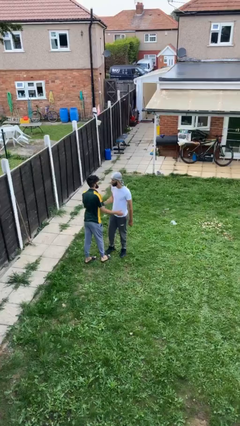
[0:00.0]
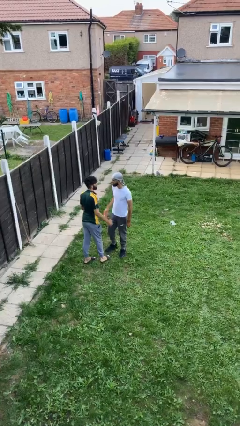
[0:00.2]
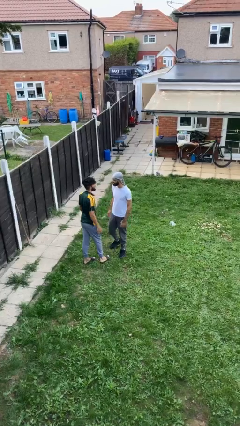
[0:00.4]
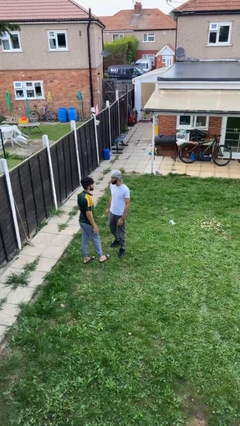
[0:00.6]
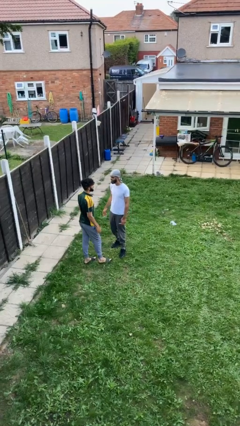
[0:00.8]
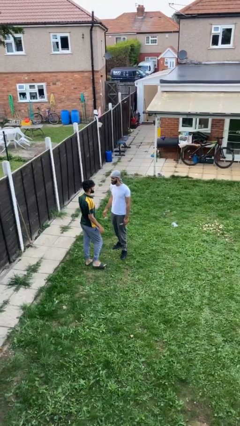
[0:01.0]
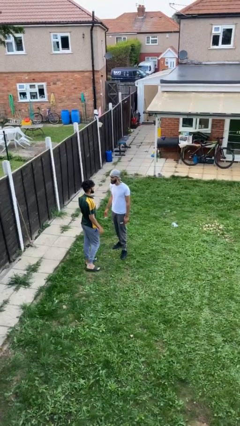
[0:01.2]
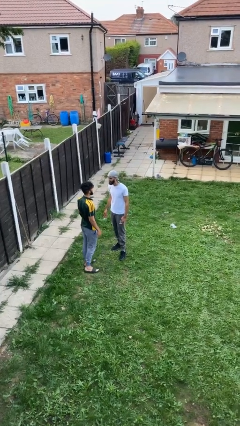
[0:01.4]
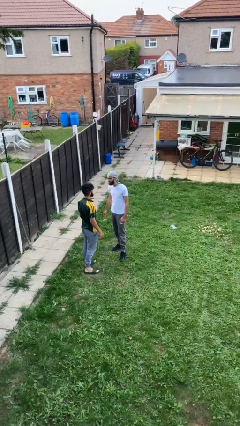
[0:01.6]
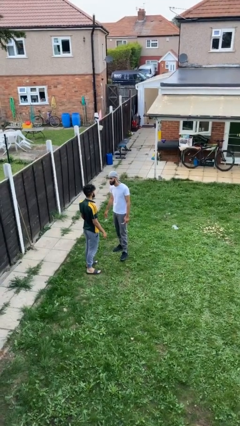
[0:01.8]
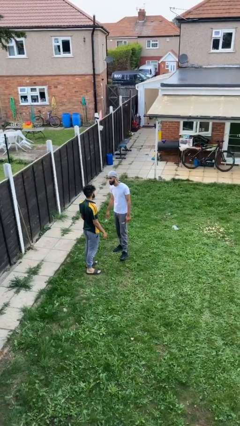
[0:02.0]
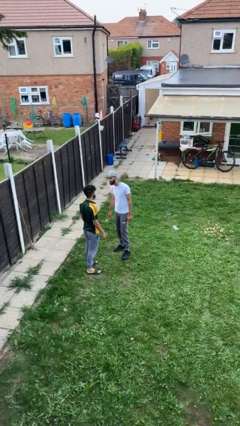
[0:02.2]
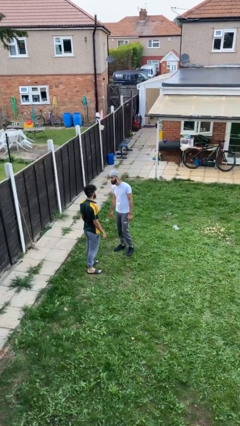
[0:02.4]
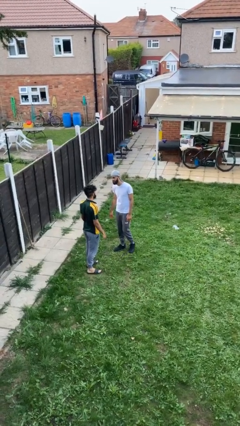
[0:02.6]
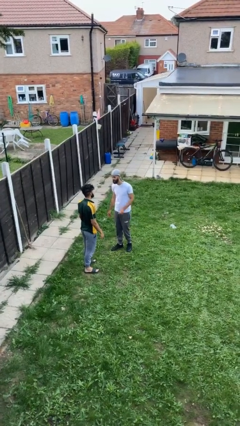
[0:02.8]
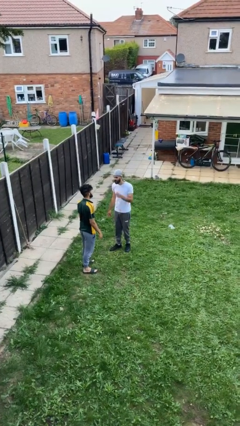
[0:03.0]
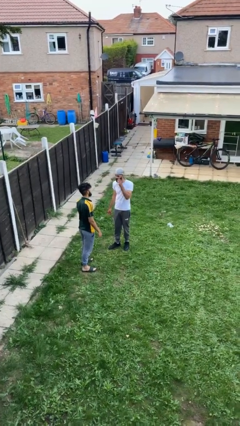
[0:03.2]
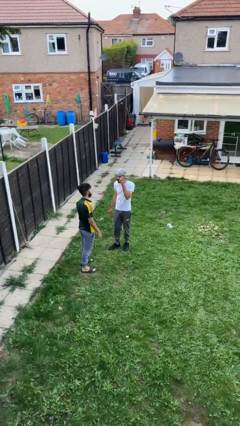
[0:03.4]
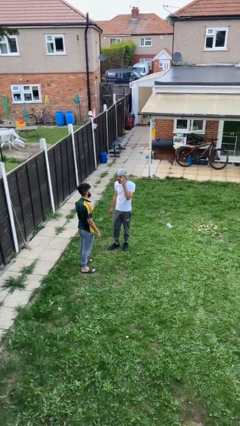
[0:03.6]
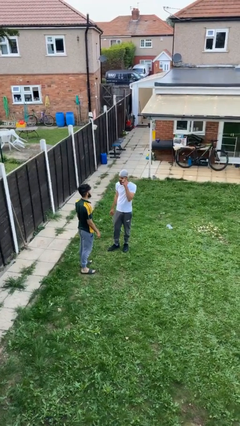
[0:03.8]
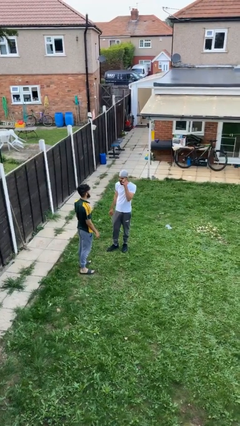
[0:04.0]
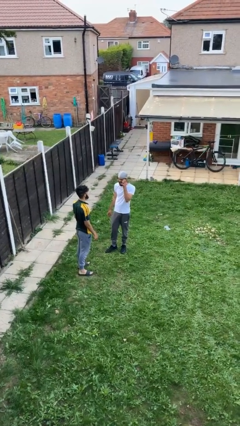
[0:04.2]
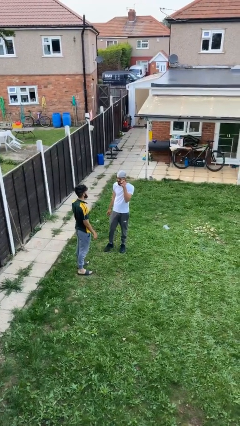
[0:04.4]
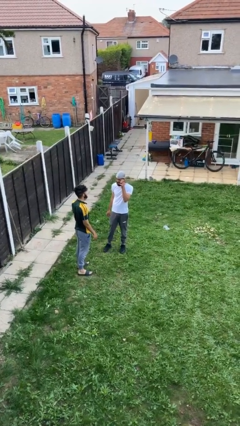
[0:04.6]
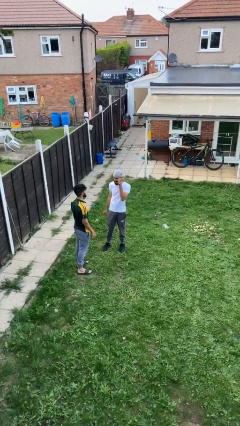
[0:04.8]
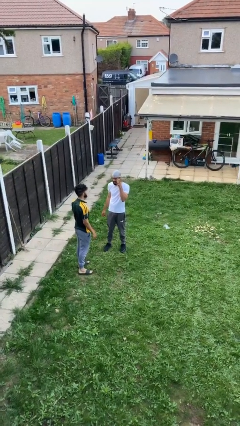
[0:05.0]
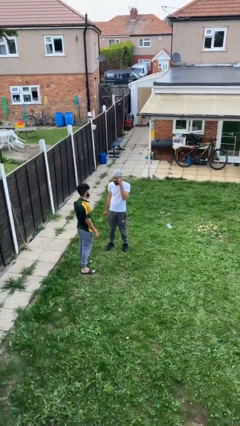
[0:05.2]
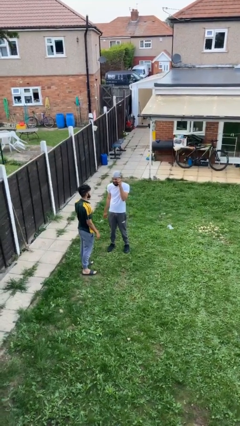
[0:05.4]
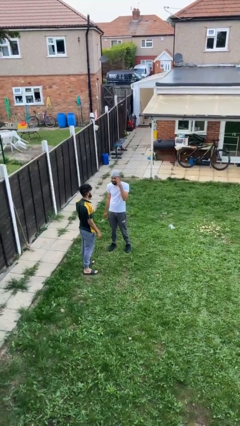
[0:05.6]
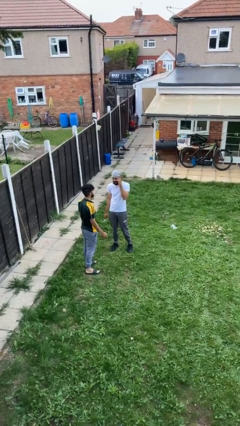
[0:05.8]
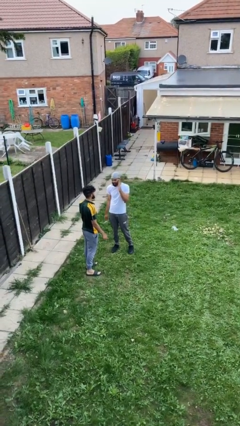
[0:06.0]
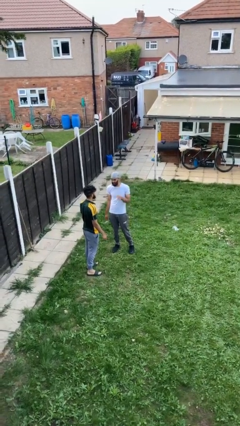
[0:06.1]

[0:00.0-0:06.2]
person talks to person

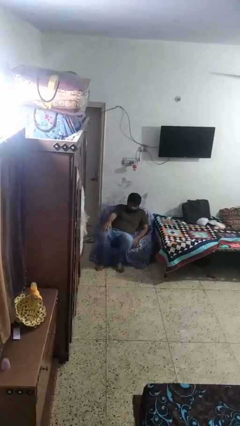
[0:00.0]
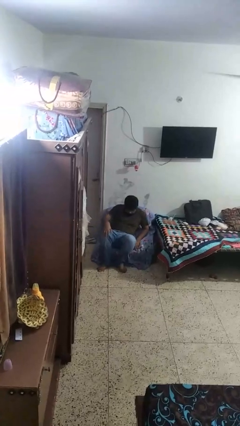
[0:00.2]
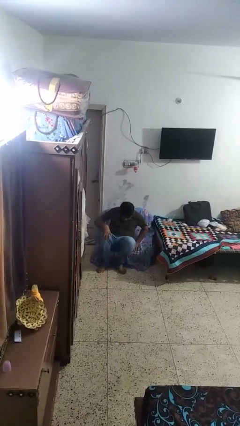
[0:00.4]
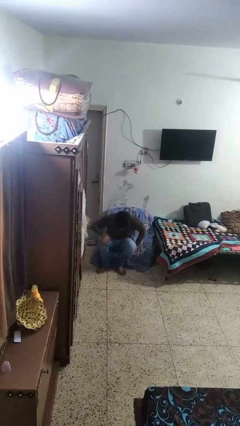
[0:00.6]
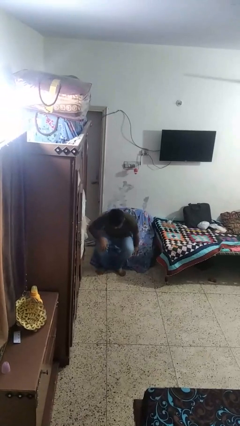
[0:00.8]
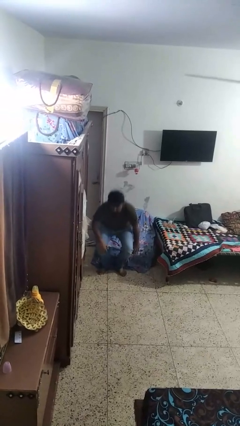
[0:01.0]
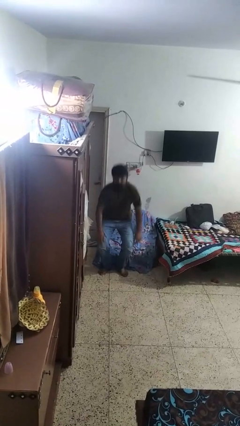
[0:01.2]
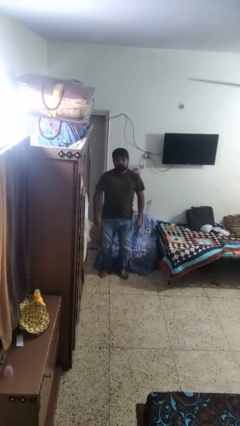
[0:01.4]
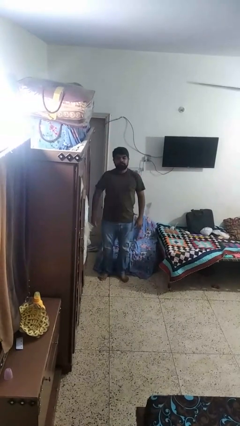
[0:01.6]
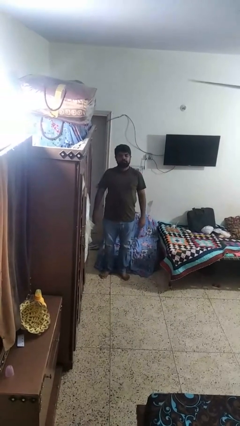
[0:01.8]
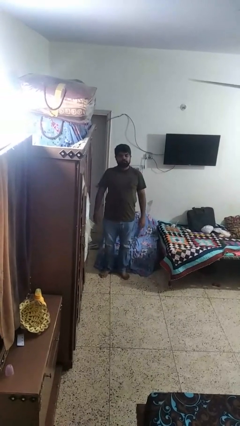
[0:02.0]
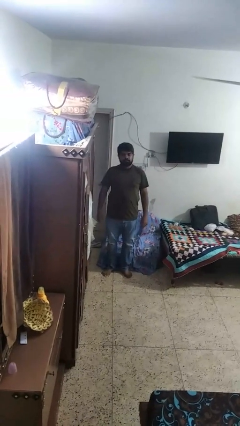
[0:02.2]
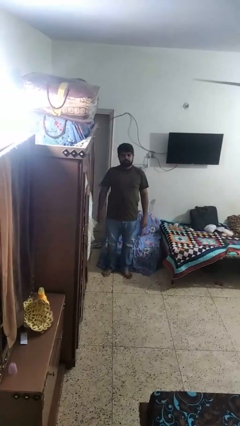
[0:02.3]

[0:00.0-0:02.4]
person stands up

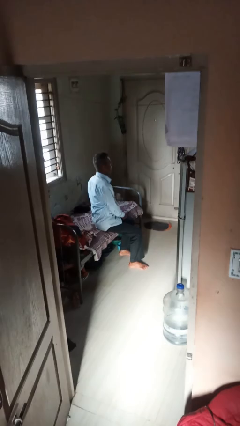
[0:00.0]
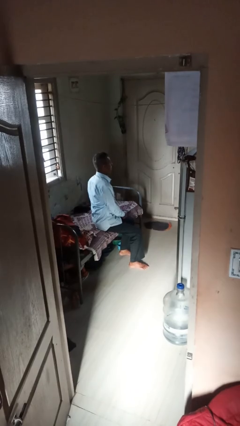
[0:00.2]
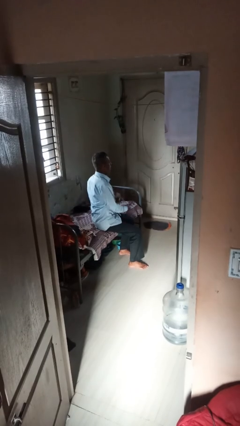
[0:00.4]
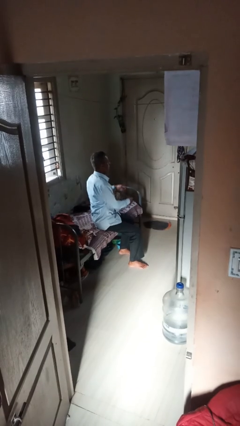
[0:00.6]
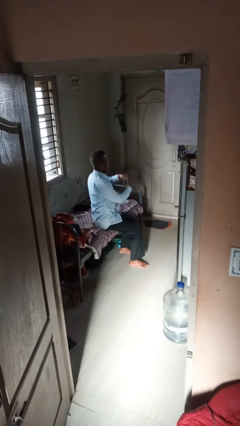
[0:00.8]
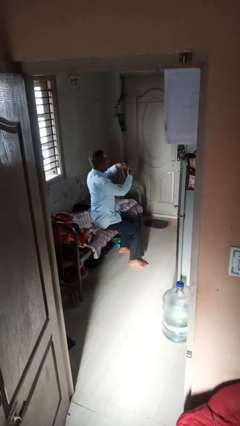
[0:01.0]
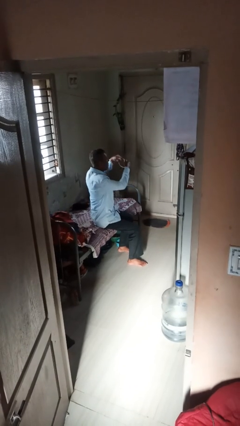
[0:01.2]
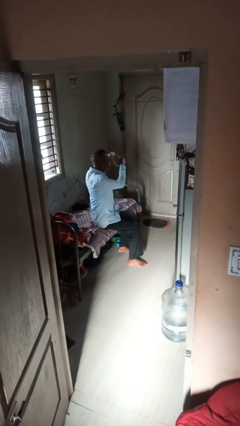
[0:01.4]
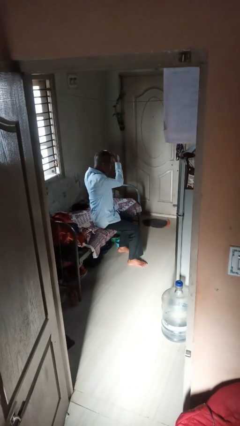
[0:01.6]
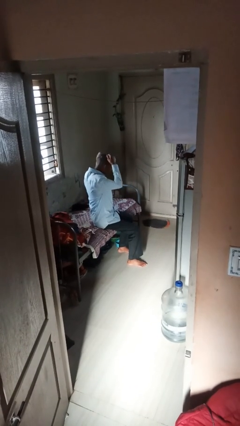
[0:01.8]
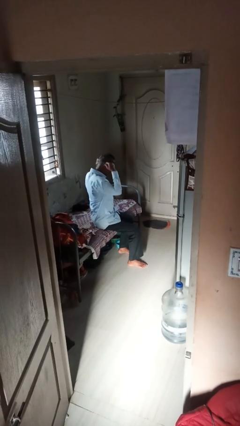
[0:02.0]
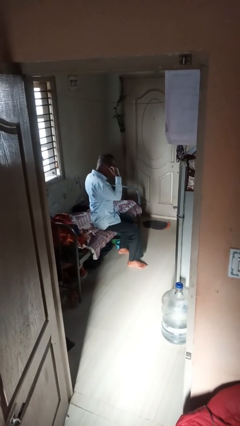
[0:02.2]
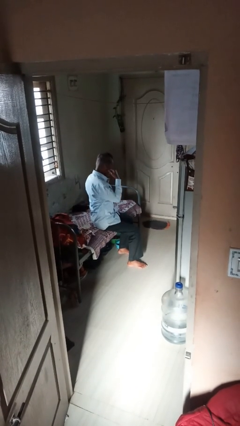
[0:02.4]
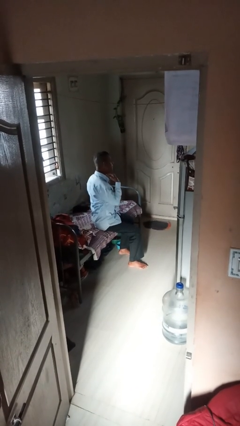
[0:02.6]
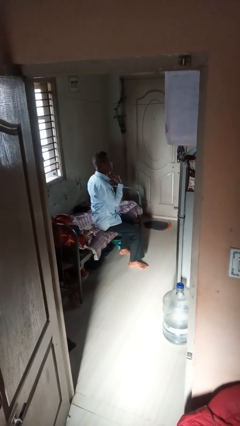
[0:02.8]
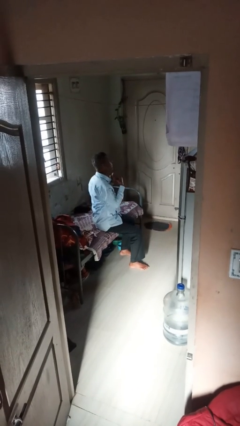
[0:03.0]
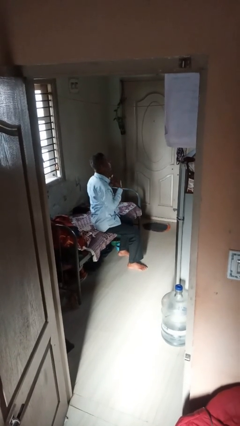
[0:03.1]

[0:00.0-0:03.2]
person puts on necklace

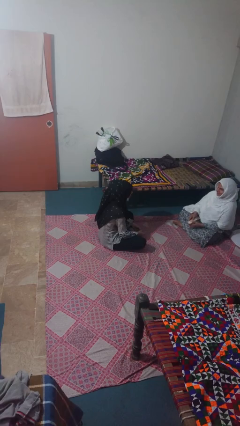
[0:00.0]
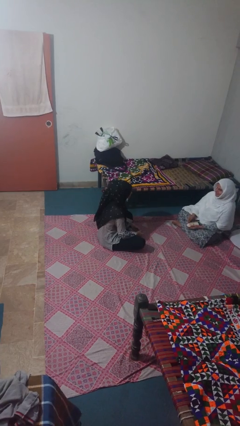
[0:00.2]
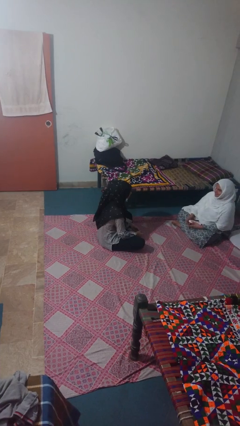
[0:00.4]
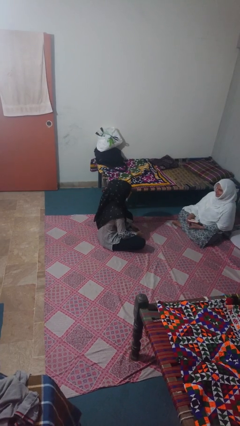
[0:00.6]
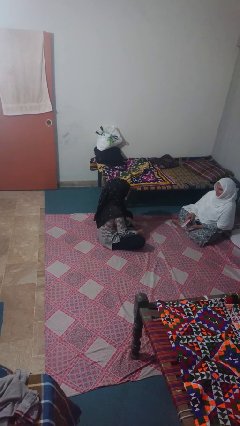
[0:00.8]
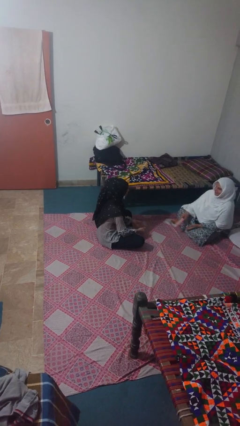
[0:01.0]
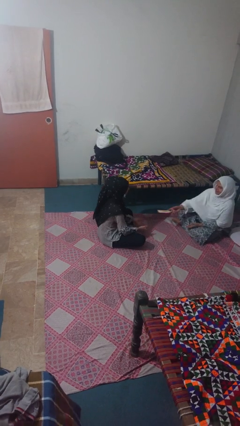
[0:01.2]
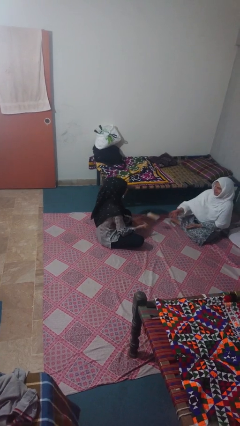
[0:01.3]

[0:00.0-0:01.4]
person catches object from person

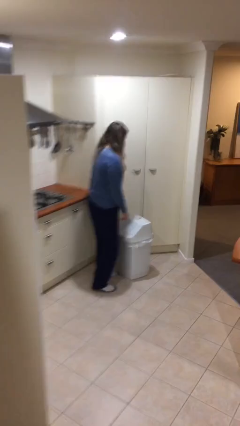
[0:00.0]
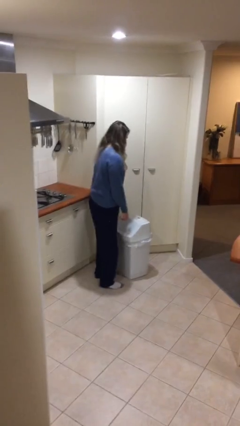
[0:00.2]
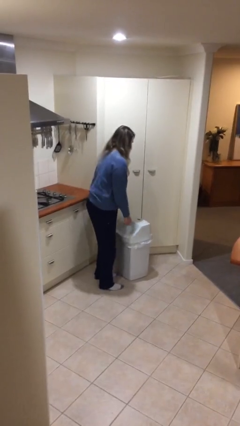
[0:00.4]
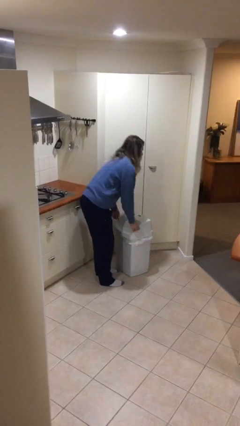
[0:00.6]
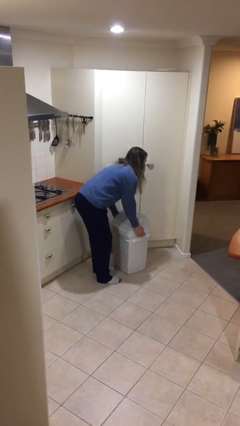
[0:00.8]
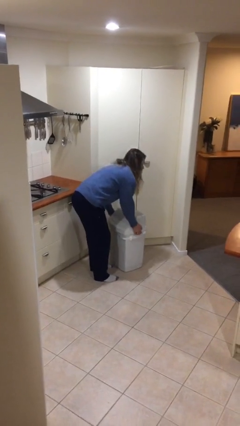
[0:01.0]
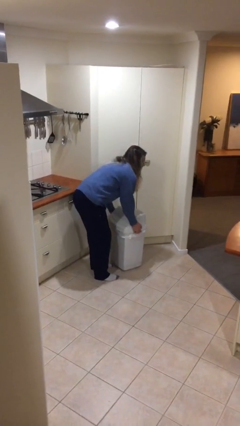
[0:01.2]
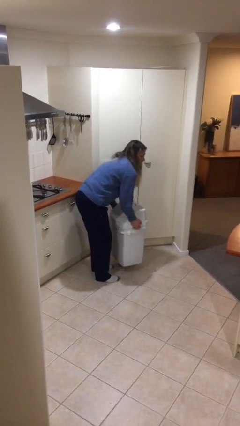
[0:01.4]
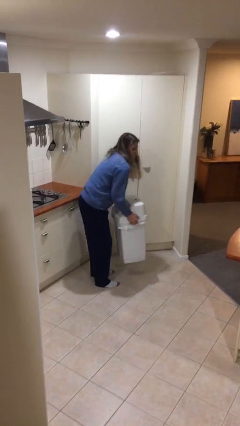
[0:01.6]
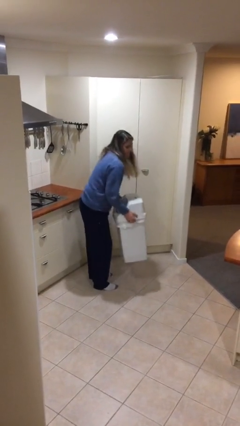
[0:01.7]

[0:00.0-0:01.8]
person picks up object from floor

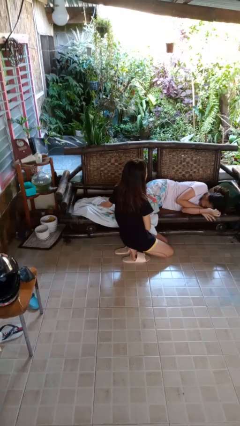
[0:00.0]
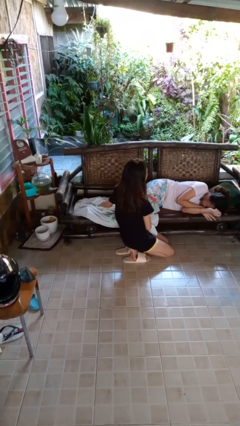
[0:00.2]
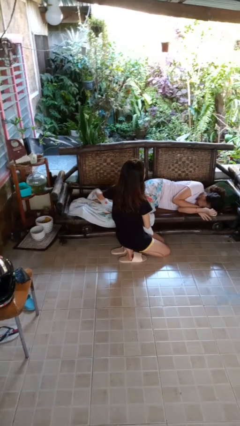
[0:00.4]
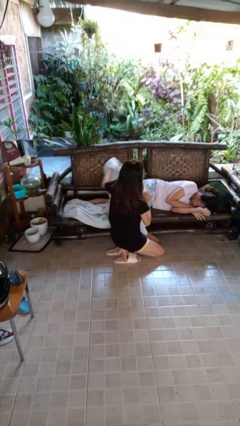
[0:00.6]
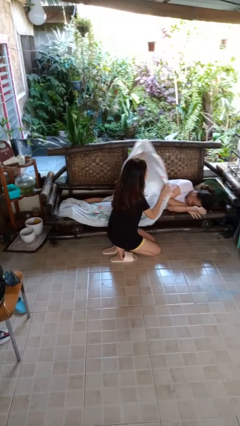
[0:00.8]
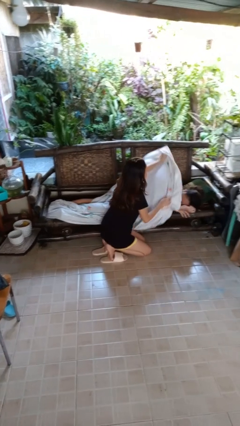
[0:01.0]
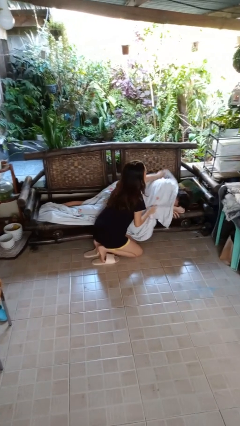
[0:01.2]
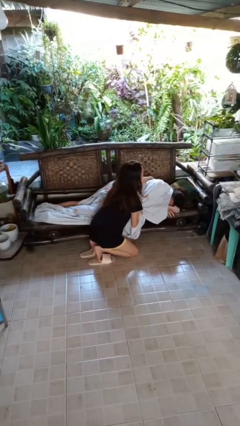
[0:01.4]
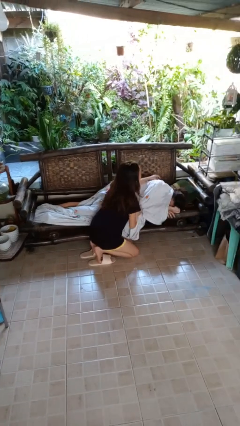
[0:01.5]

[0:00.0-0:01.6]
person covers friend with blanket

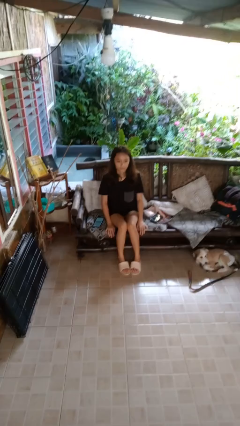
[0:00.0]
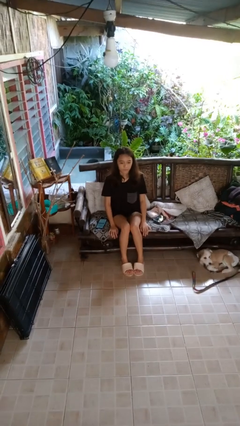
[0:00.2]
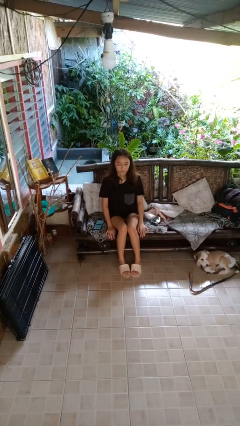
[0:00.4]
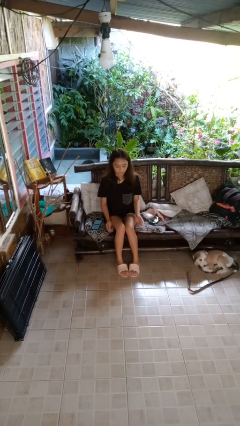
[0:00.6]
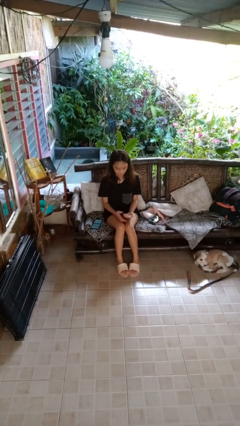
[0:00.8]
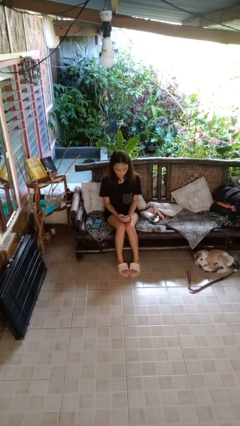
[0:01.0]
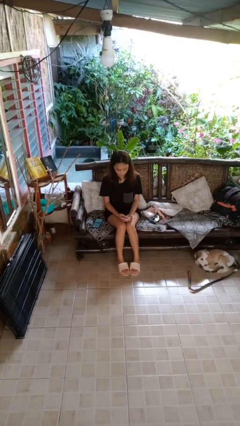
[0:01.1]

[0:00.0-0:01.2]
person looks at hands in lap
